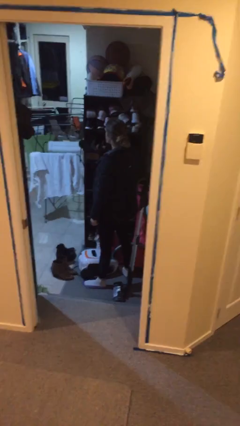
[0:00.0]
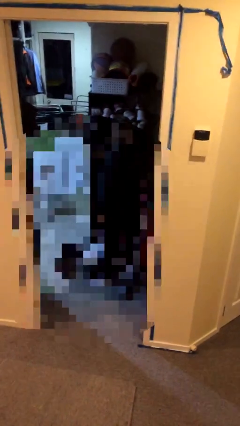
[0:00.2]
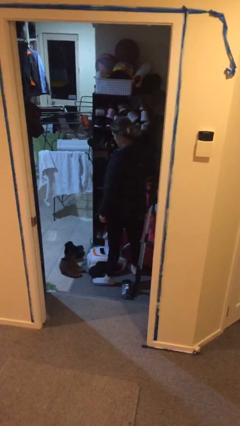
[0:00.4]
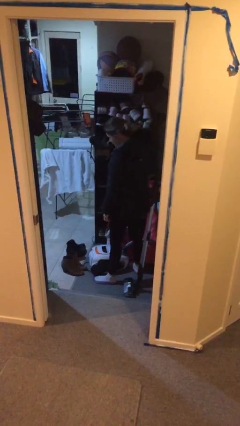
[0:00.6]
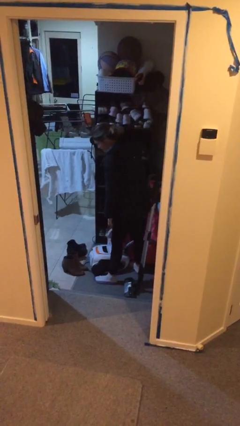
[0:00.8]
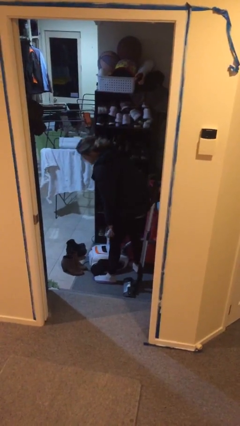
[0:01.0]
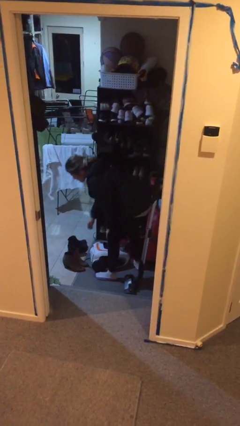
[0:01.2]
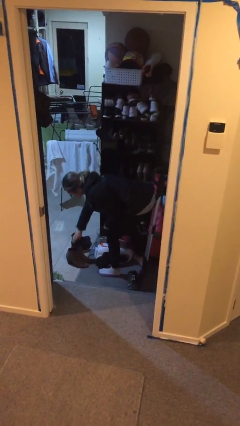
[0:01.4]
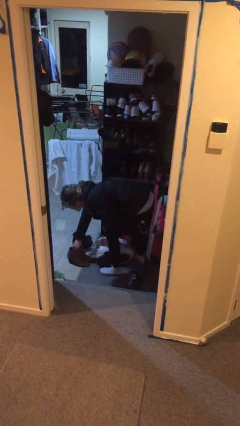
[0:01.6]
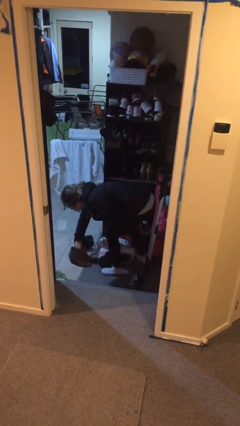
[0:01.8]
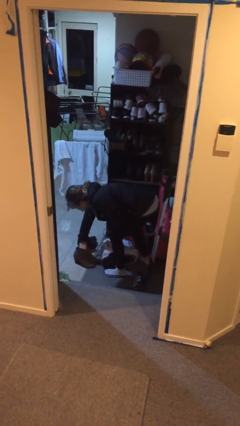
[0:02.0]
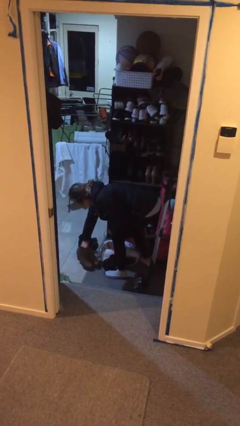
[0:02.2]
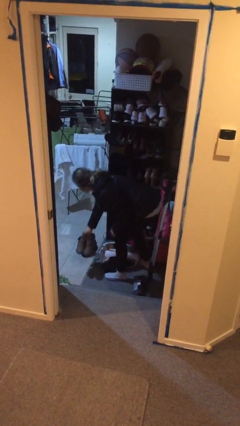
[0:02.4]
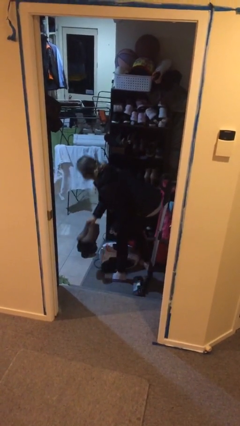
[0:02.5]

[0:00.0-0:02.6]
person picks up object from floor

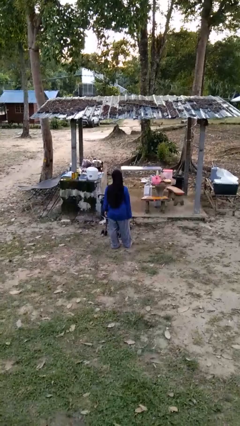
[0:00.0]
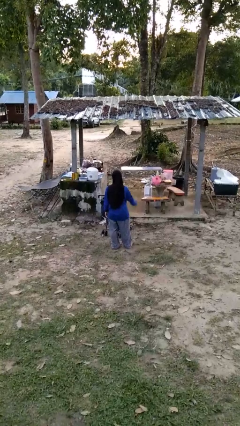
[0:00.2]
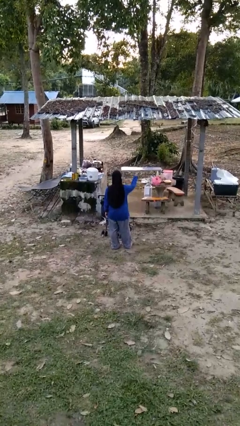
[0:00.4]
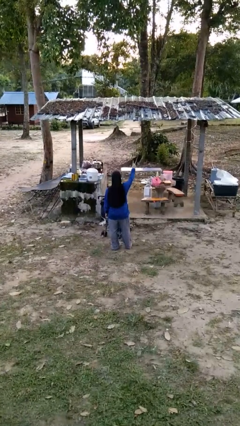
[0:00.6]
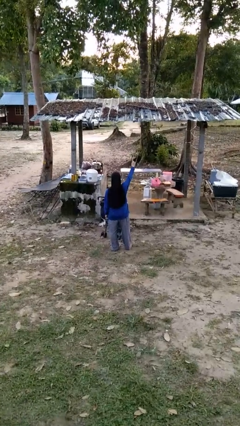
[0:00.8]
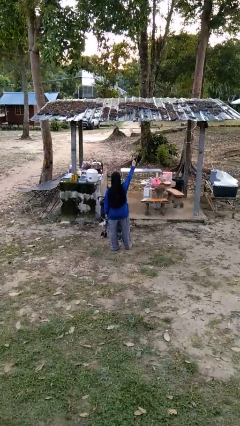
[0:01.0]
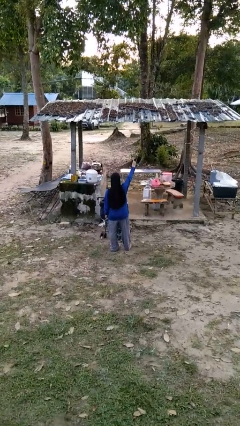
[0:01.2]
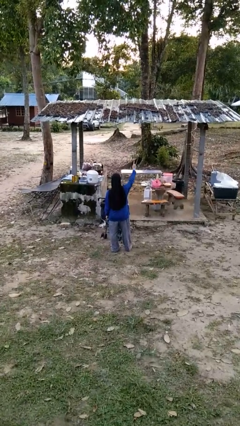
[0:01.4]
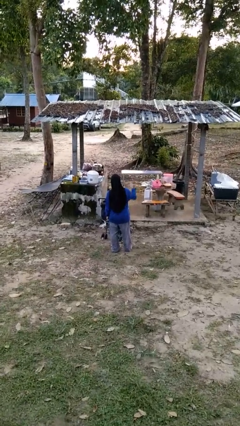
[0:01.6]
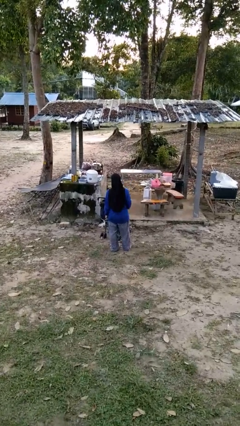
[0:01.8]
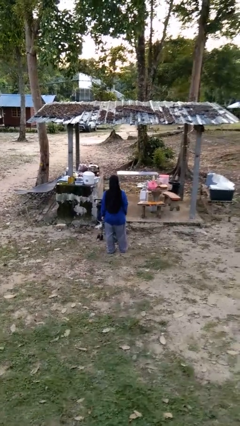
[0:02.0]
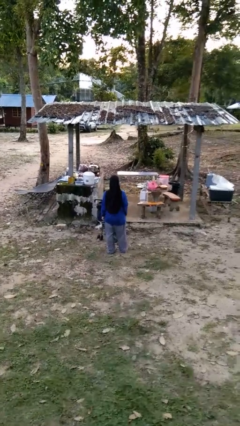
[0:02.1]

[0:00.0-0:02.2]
person gestures number one

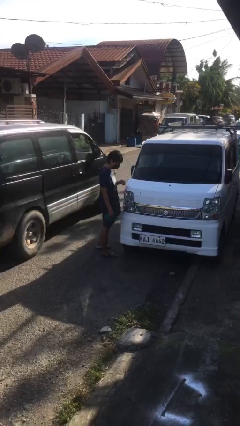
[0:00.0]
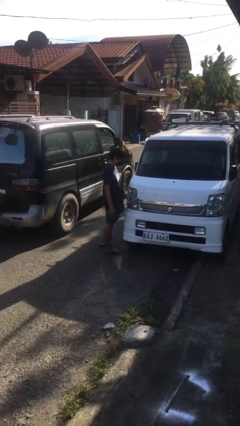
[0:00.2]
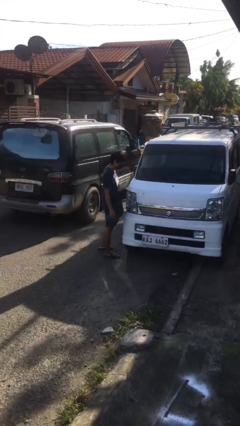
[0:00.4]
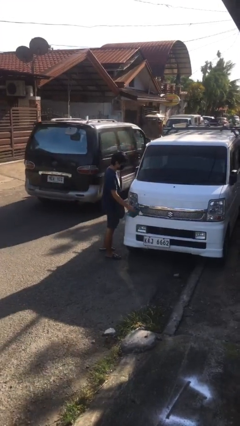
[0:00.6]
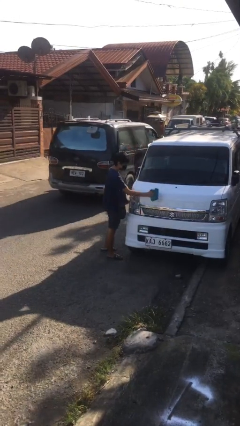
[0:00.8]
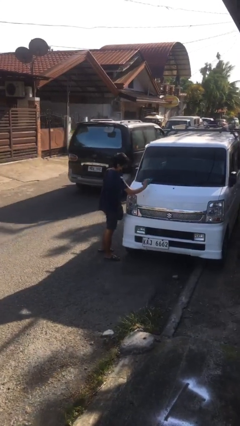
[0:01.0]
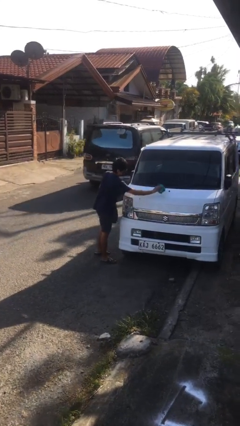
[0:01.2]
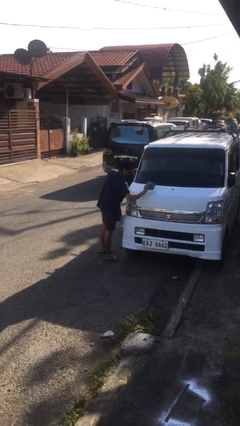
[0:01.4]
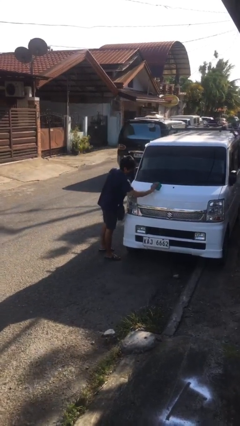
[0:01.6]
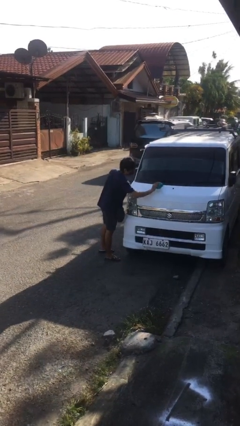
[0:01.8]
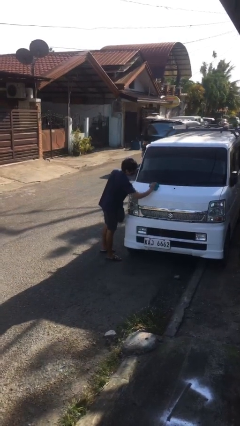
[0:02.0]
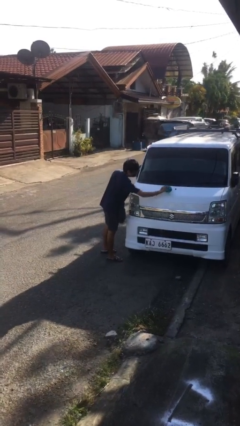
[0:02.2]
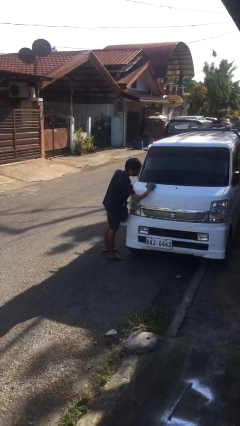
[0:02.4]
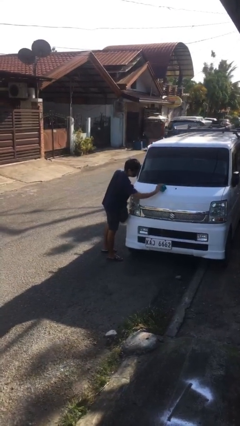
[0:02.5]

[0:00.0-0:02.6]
person polishes car with rag

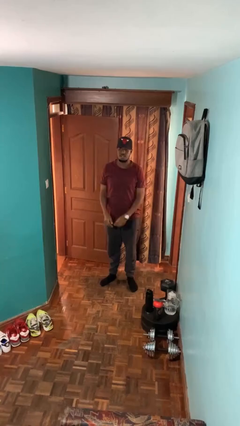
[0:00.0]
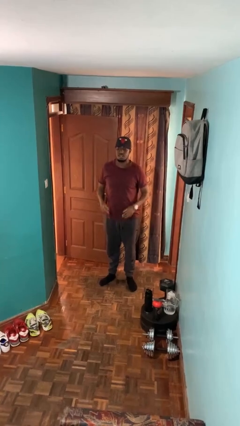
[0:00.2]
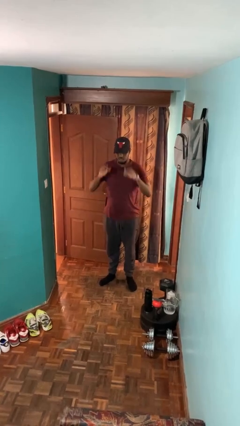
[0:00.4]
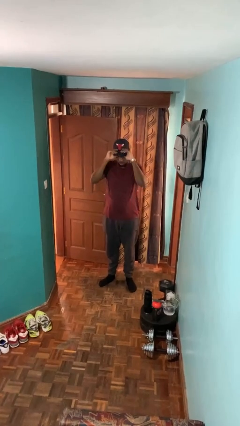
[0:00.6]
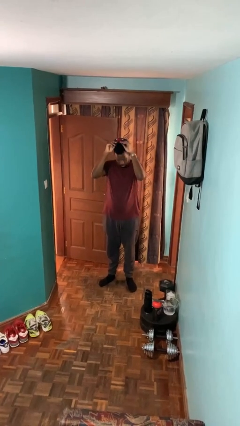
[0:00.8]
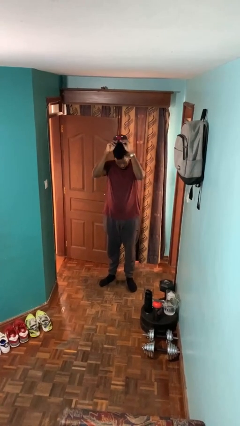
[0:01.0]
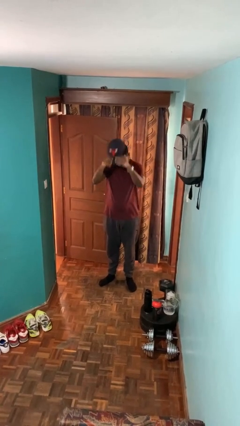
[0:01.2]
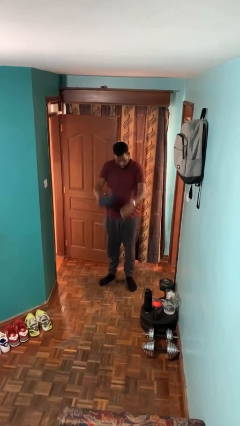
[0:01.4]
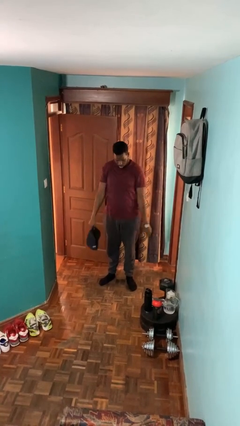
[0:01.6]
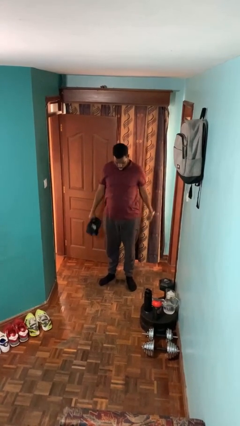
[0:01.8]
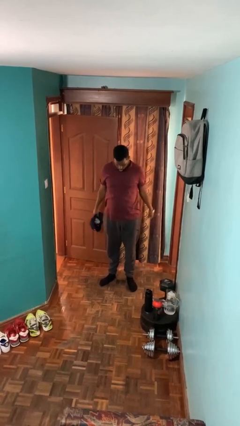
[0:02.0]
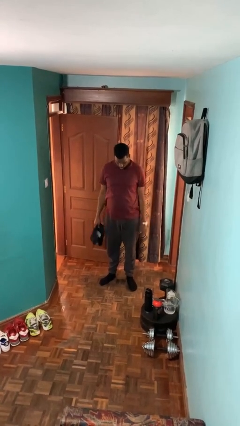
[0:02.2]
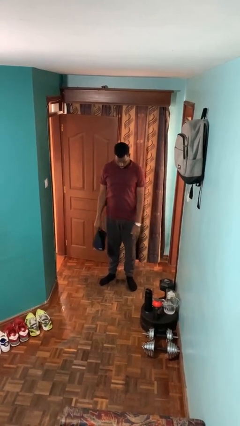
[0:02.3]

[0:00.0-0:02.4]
person takes off hat

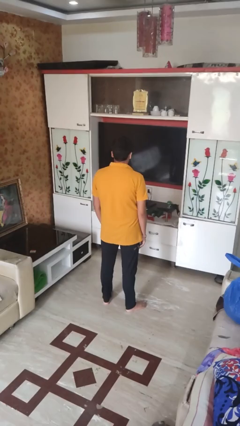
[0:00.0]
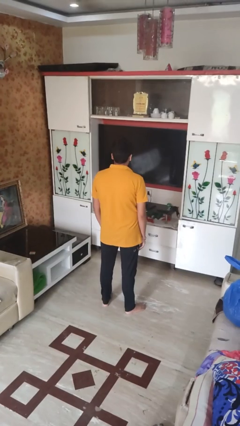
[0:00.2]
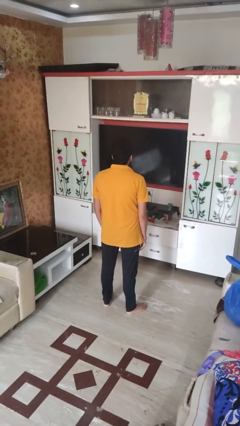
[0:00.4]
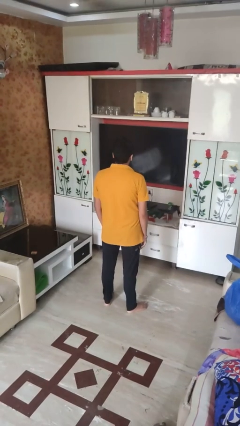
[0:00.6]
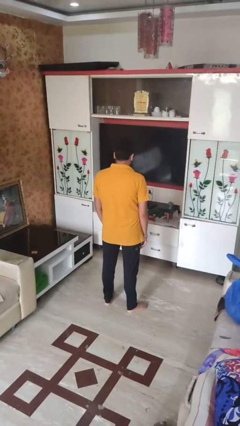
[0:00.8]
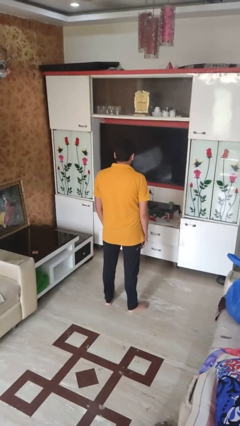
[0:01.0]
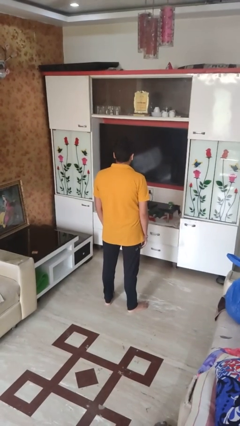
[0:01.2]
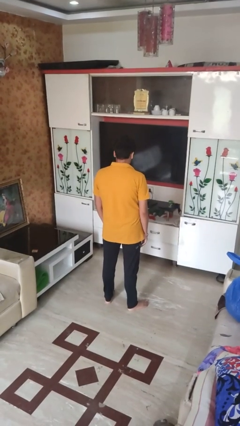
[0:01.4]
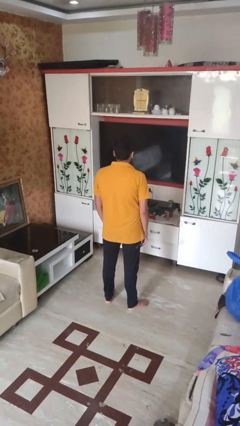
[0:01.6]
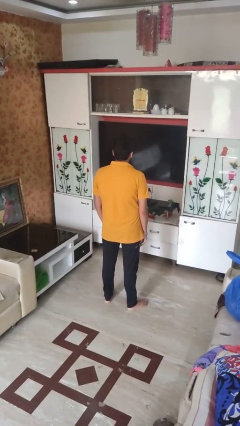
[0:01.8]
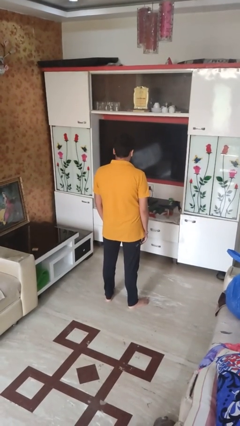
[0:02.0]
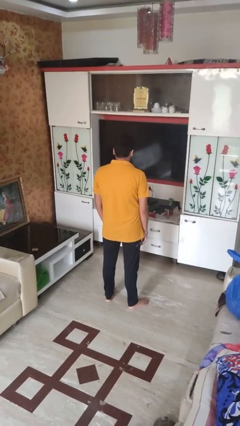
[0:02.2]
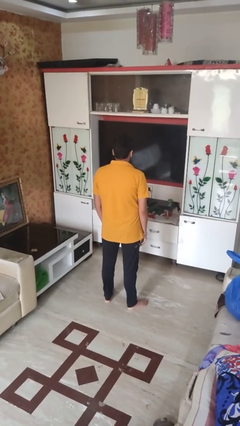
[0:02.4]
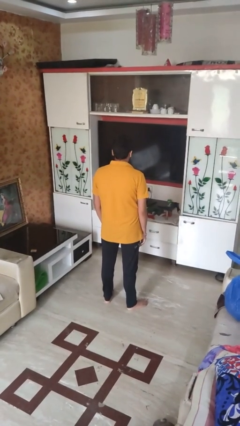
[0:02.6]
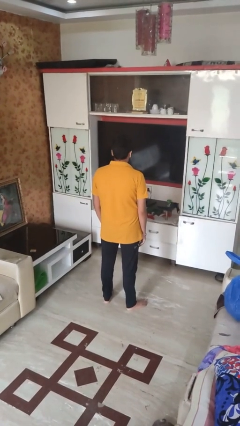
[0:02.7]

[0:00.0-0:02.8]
person nods head

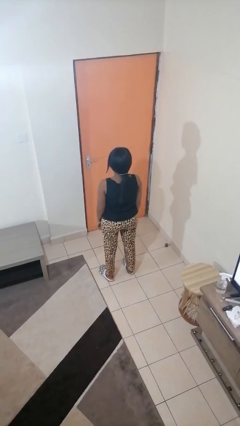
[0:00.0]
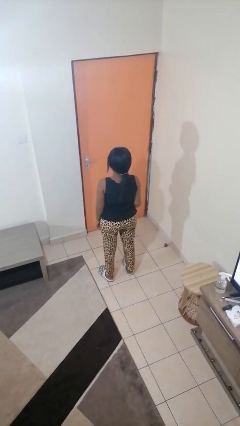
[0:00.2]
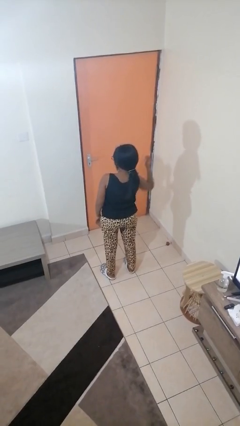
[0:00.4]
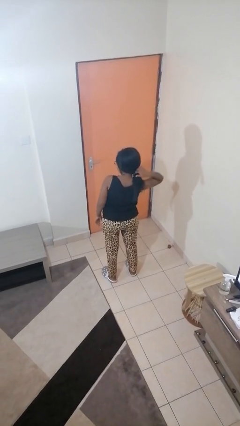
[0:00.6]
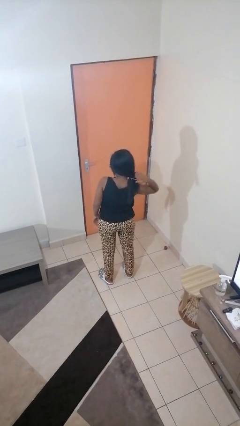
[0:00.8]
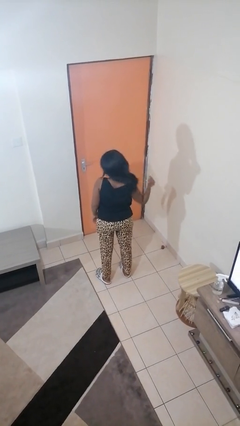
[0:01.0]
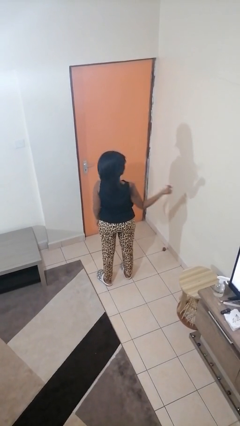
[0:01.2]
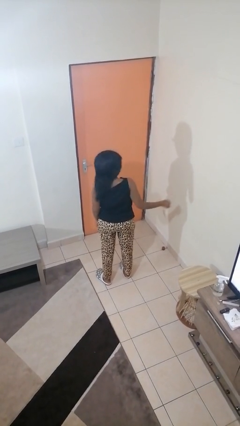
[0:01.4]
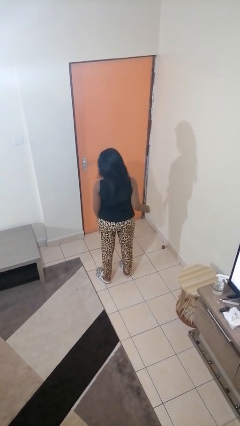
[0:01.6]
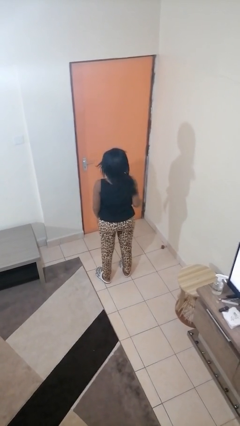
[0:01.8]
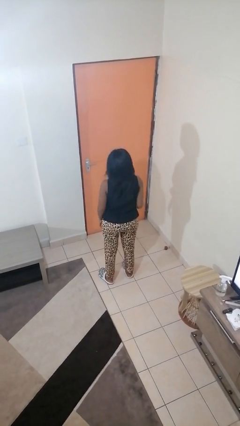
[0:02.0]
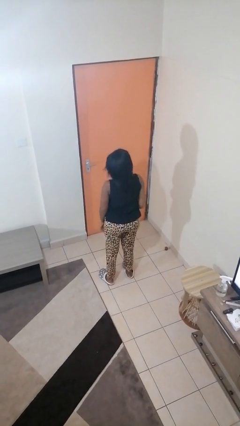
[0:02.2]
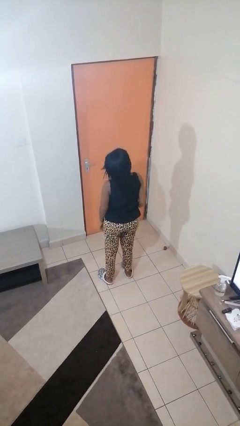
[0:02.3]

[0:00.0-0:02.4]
person takes off hairtie

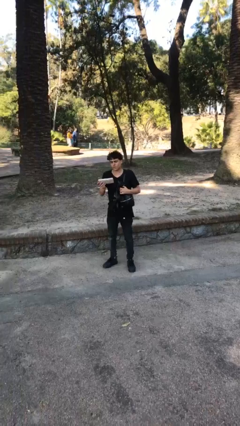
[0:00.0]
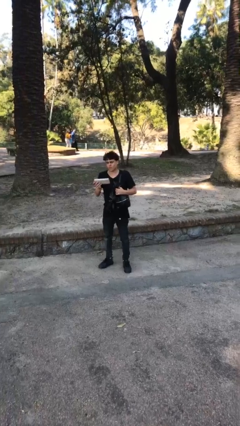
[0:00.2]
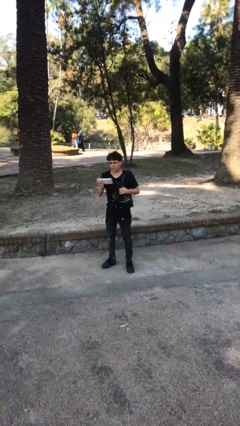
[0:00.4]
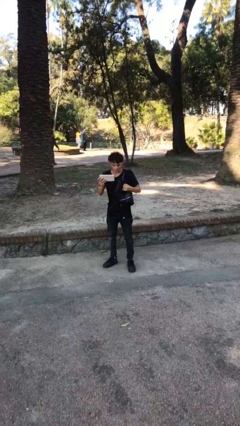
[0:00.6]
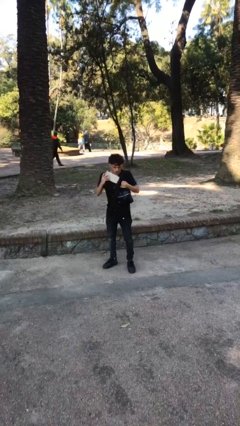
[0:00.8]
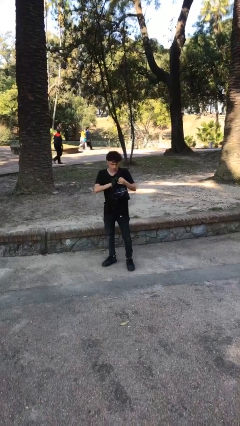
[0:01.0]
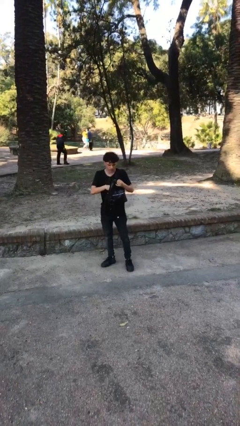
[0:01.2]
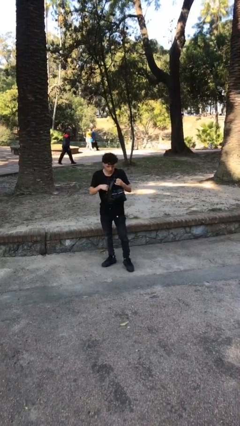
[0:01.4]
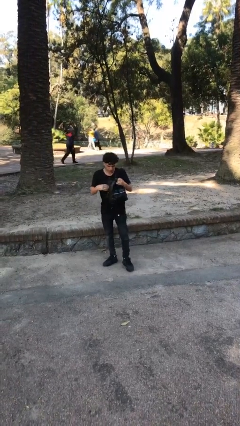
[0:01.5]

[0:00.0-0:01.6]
person puts object into purse

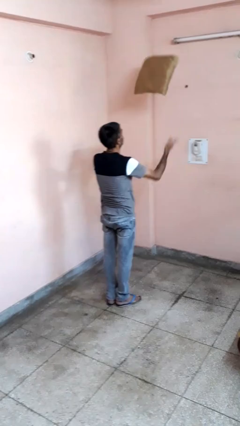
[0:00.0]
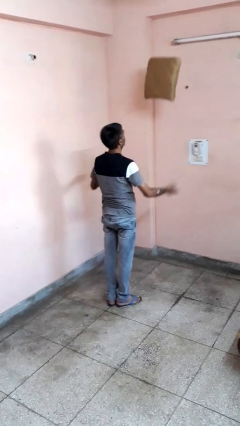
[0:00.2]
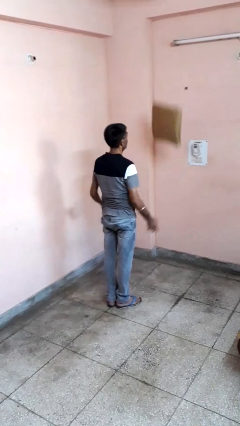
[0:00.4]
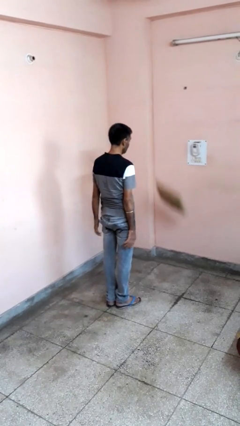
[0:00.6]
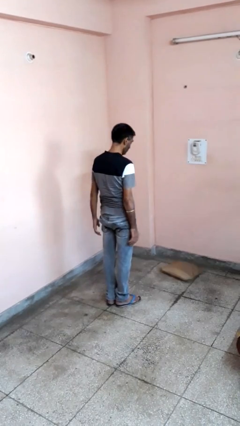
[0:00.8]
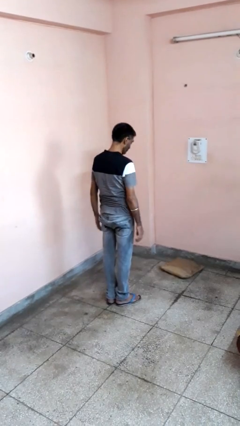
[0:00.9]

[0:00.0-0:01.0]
person throws object into air
